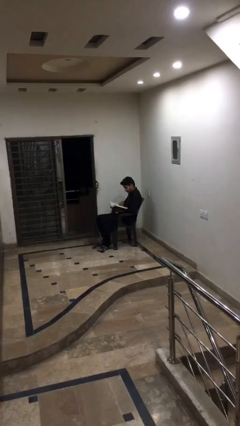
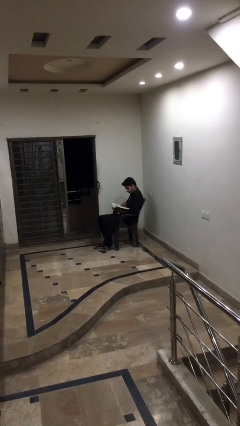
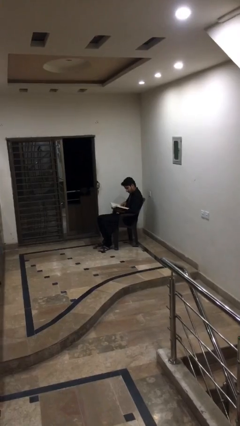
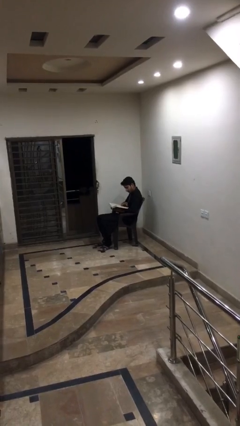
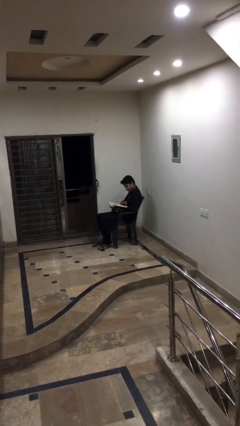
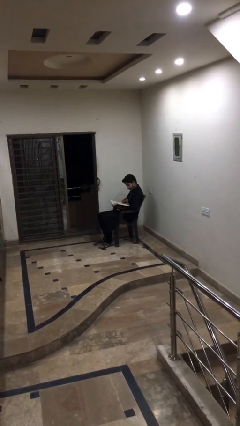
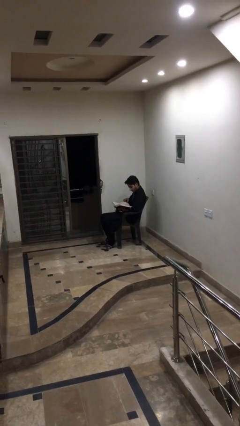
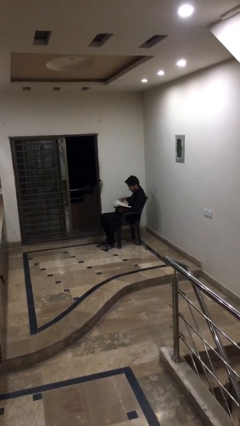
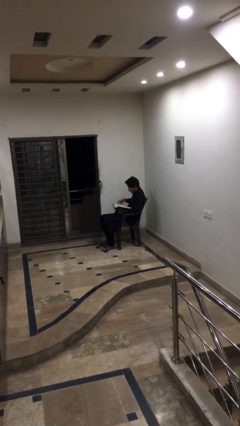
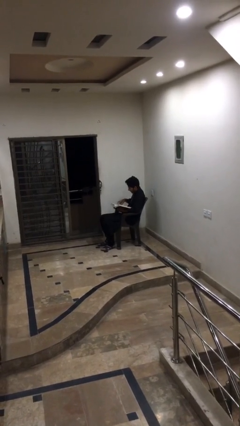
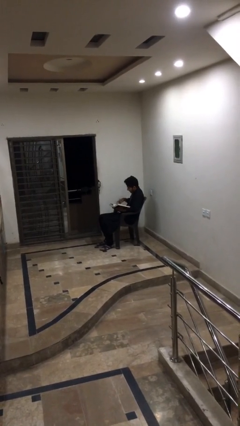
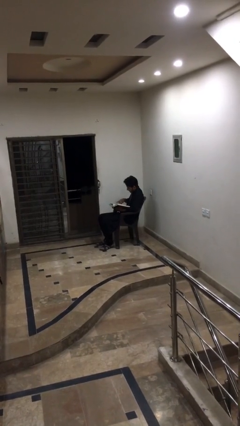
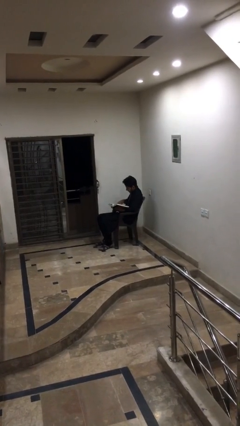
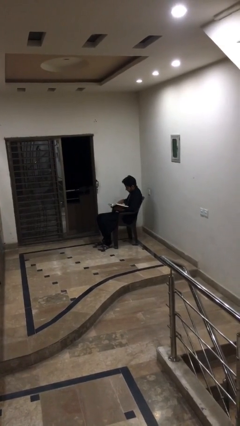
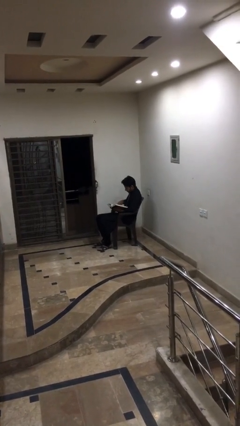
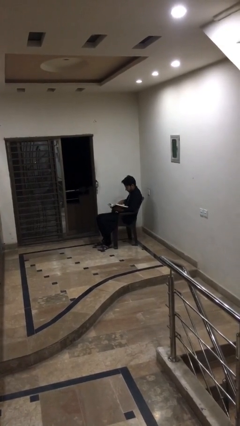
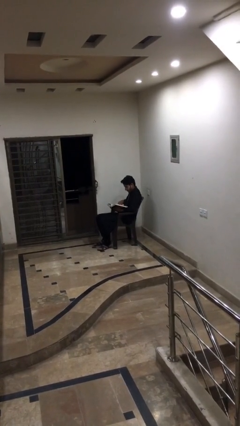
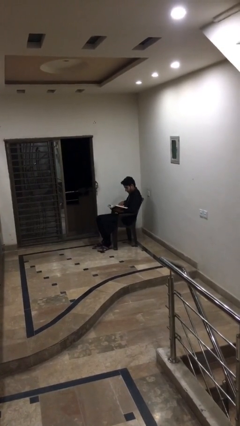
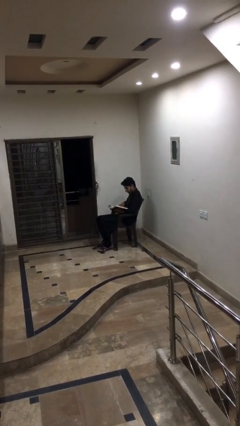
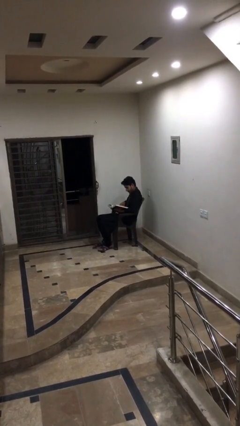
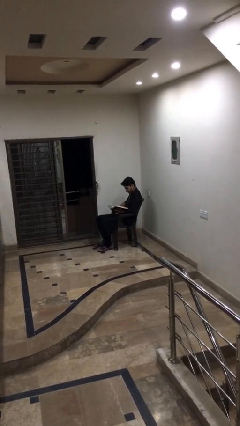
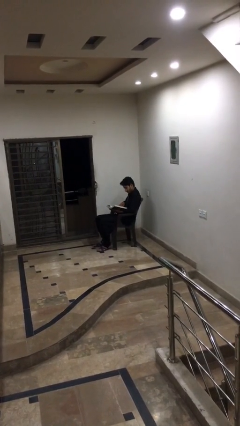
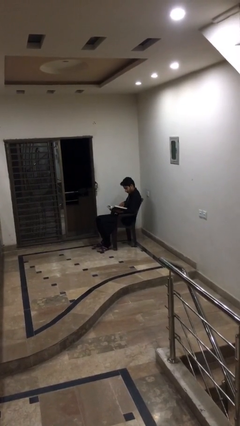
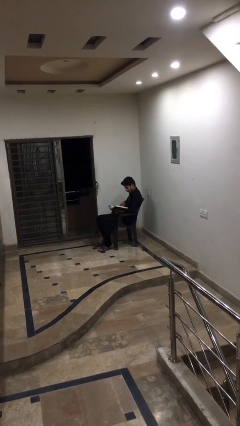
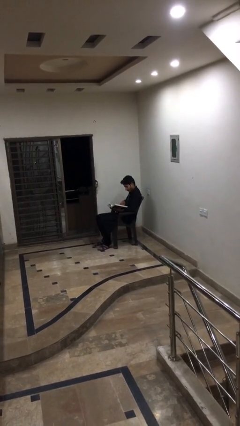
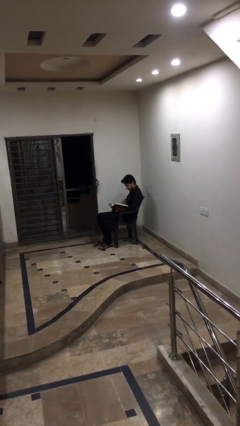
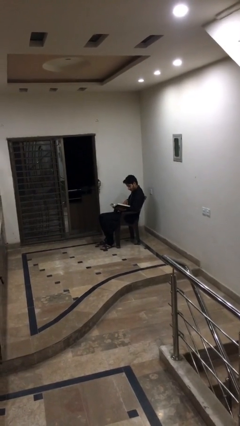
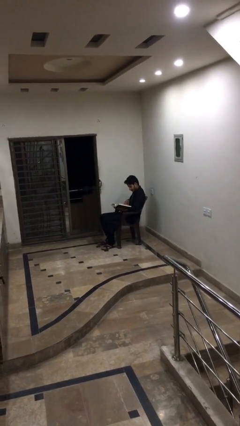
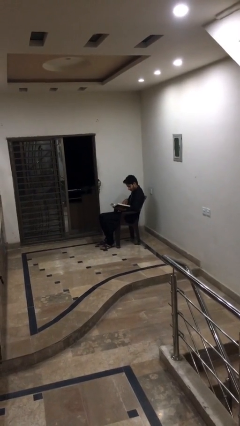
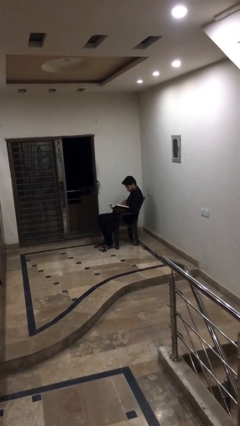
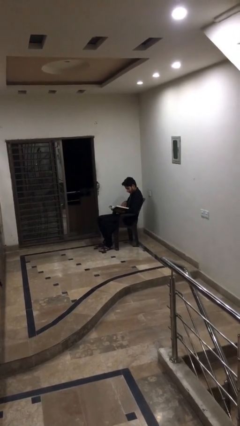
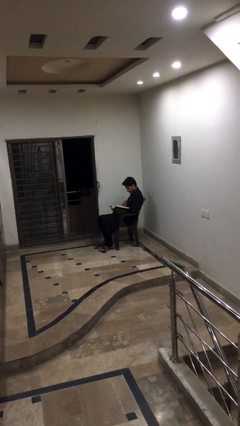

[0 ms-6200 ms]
person reads document

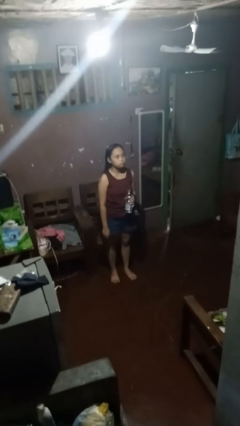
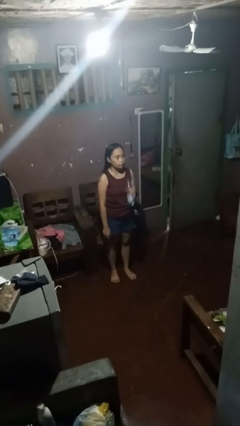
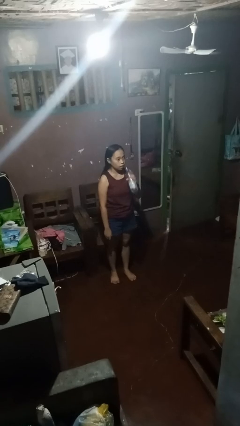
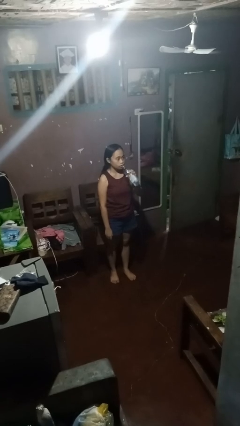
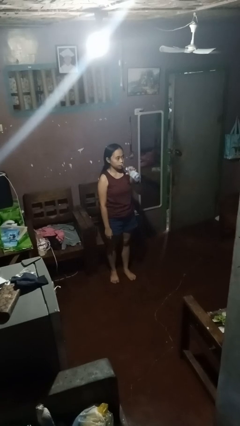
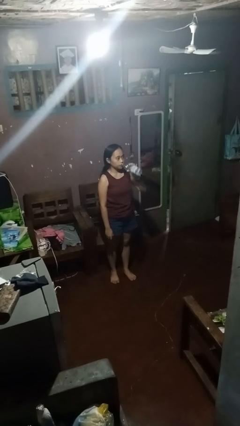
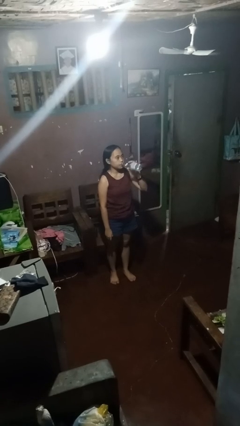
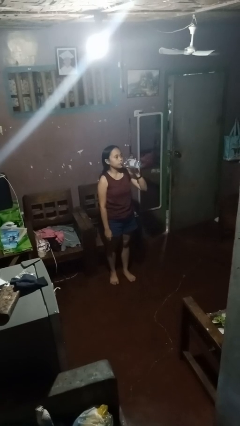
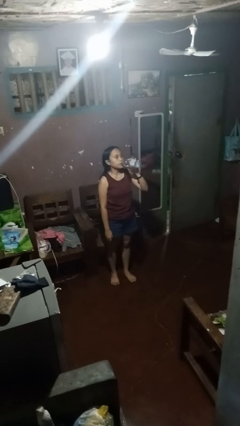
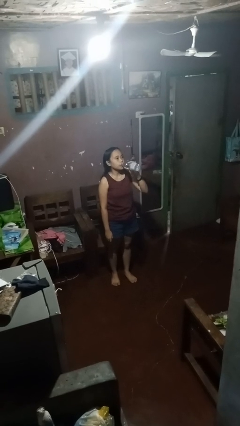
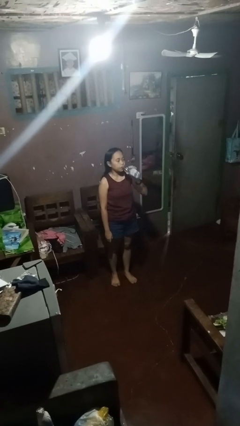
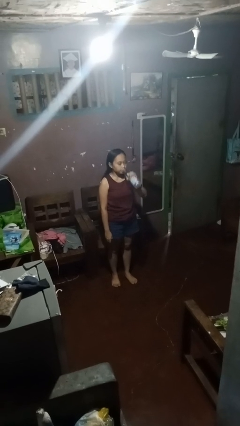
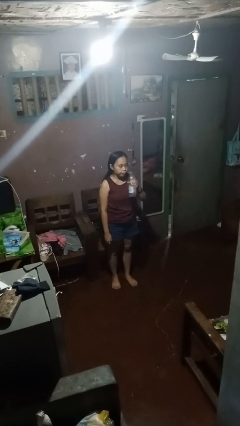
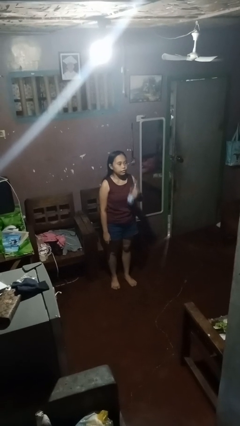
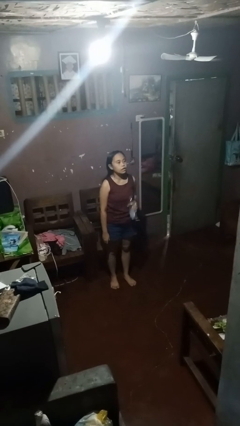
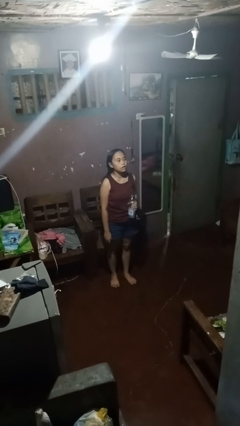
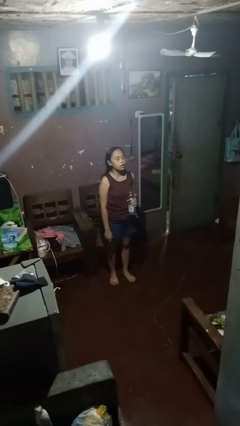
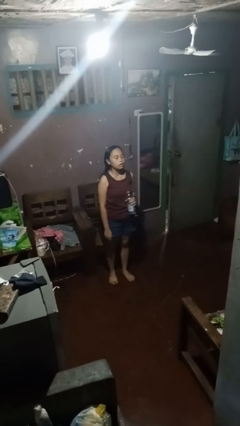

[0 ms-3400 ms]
person drinks from bottle

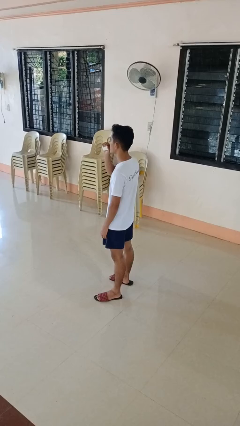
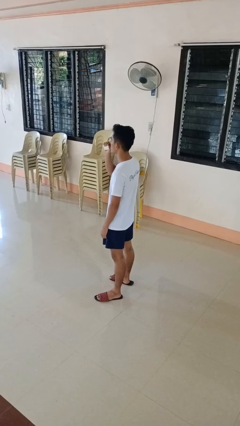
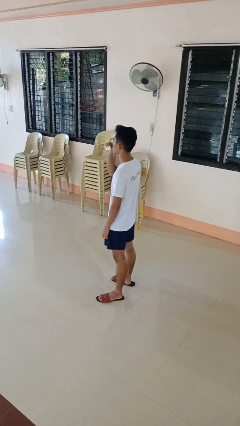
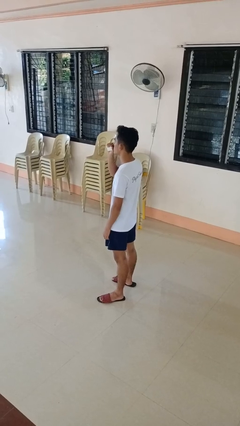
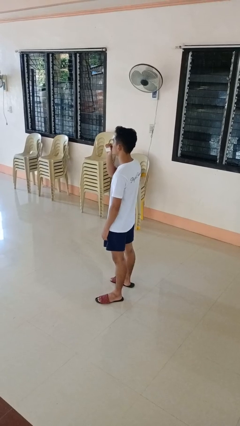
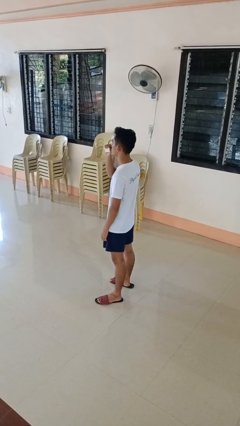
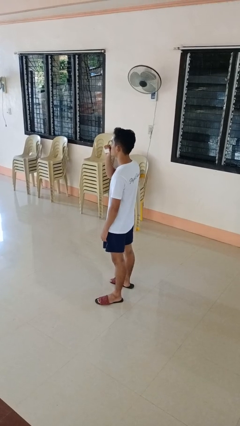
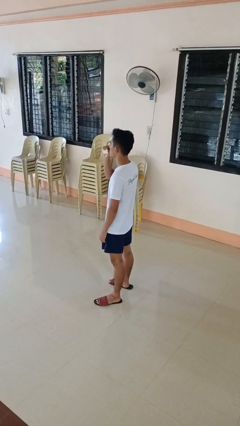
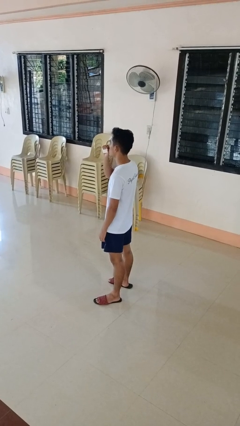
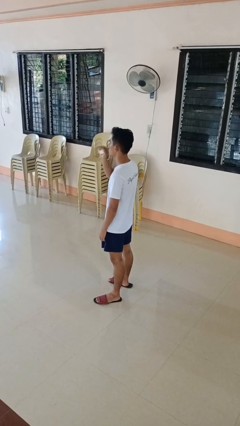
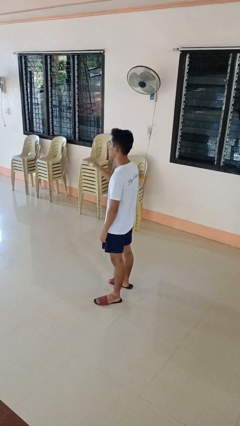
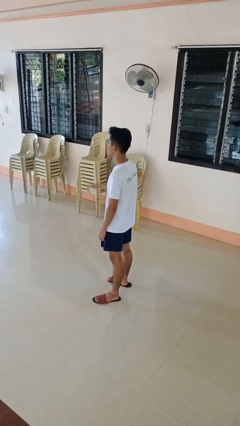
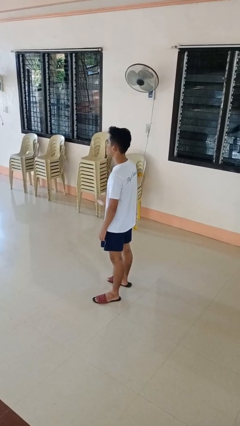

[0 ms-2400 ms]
person vapes

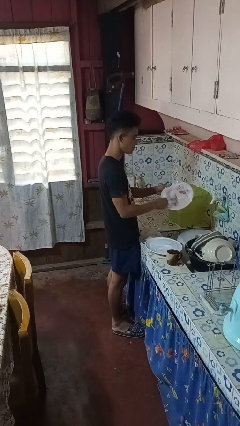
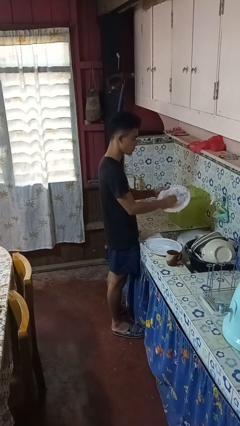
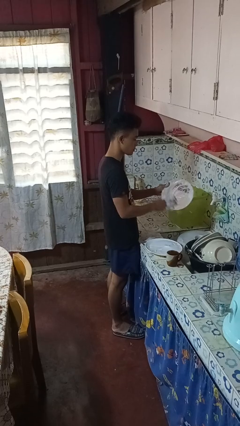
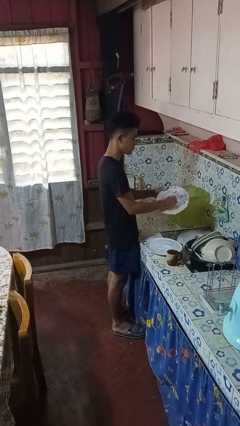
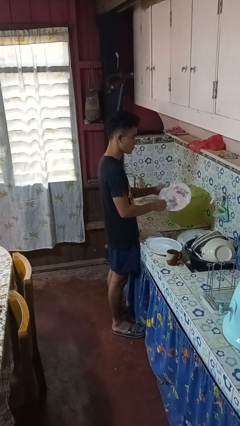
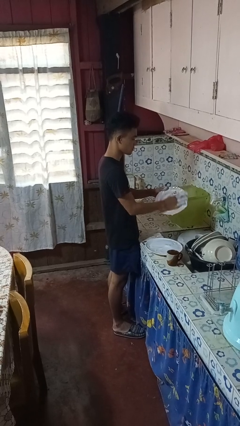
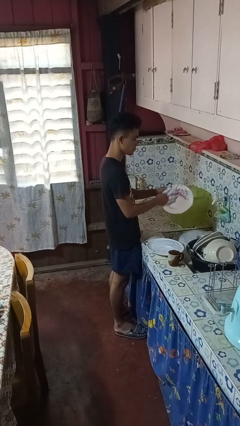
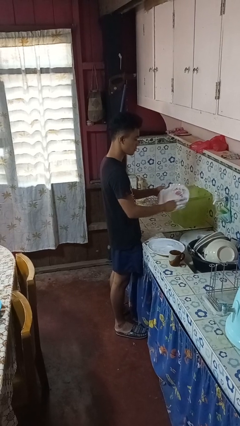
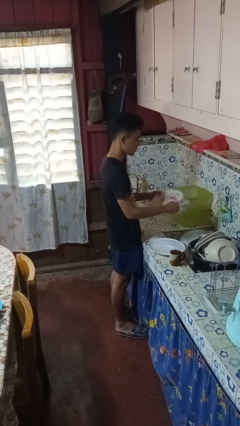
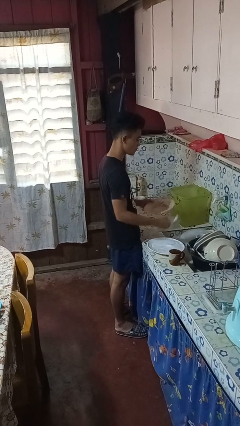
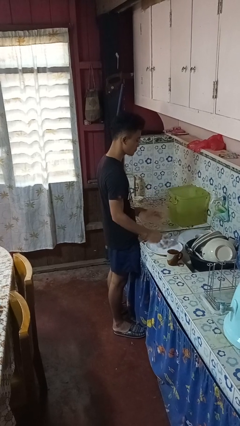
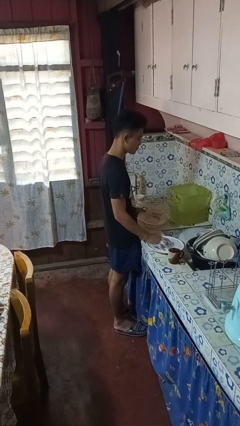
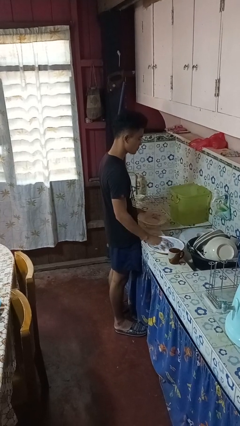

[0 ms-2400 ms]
person washes dish

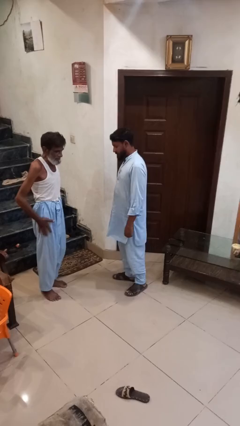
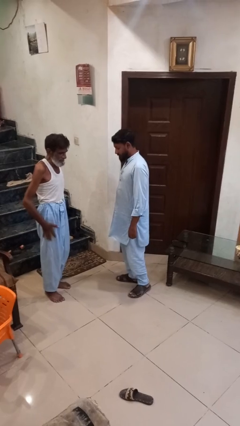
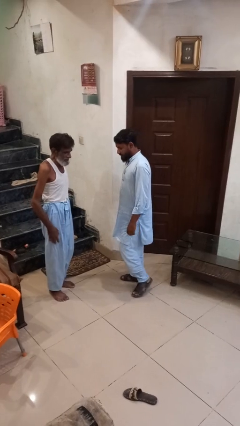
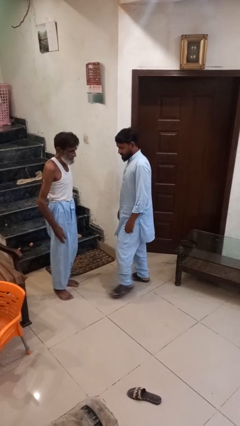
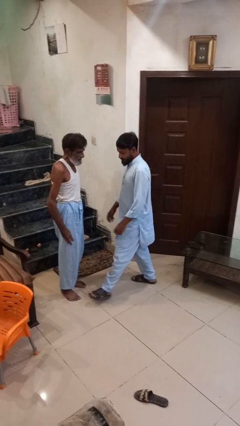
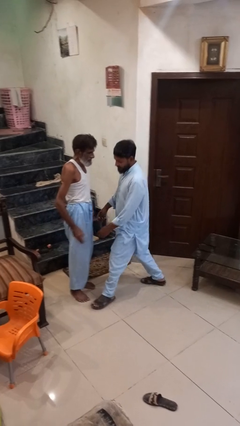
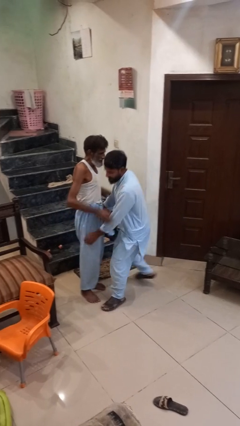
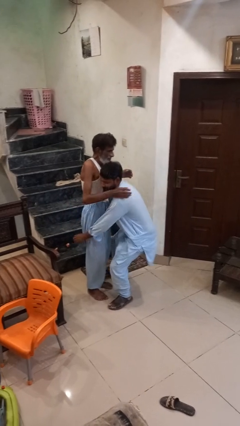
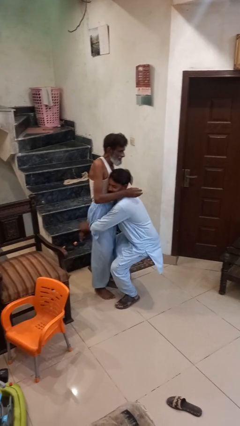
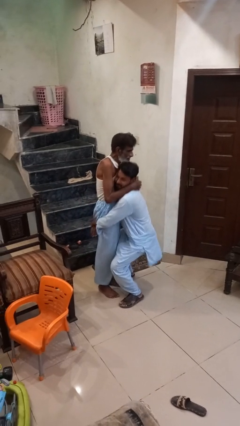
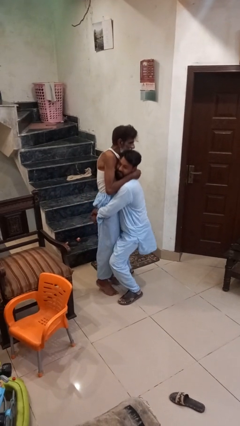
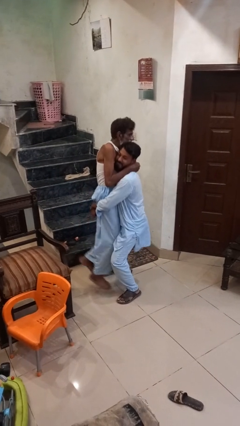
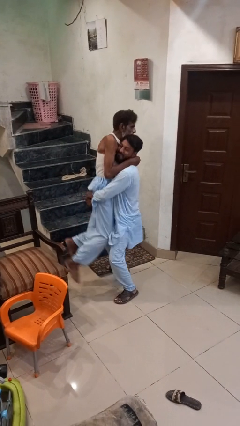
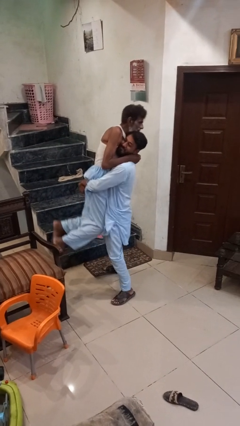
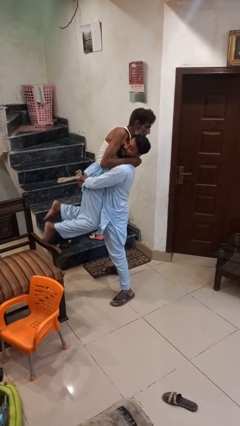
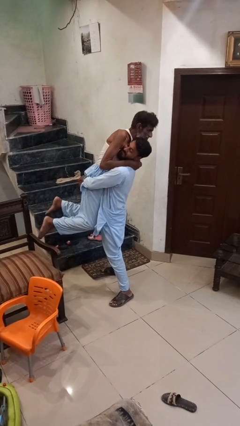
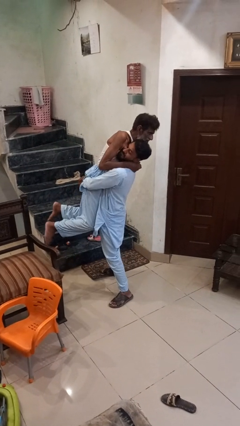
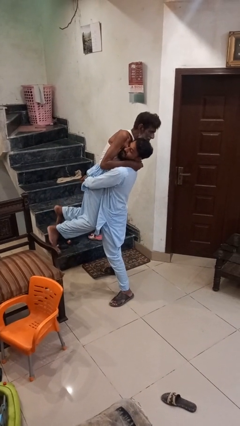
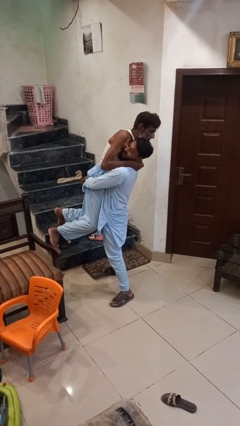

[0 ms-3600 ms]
person picks up person
